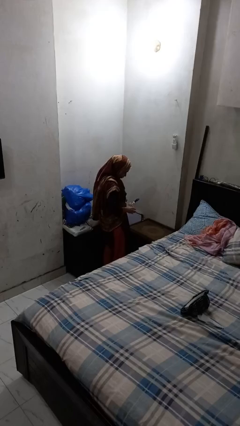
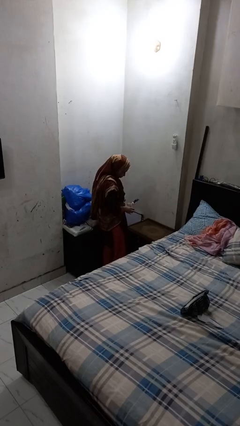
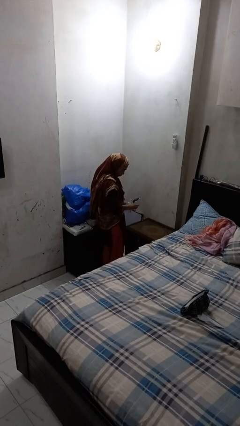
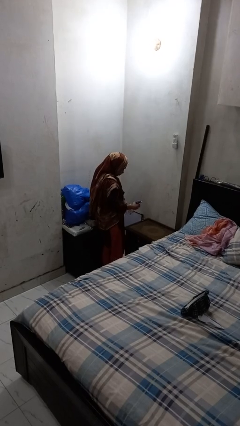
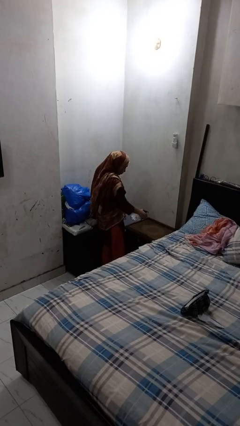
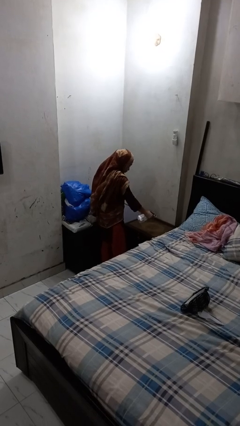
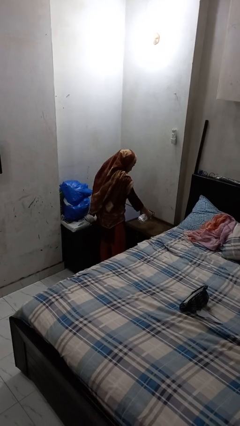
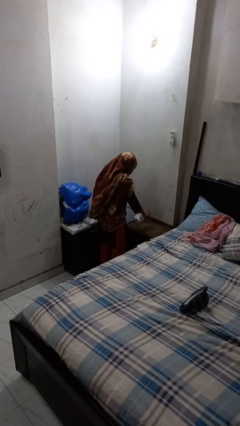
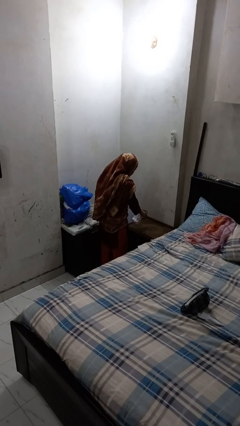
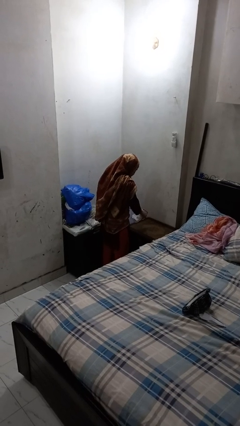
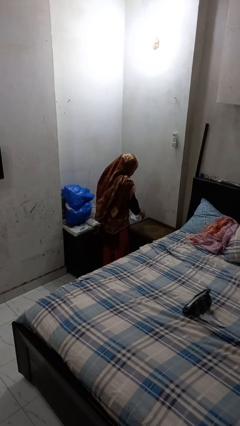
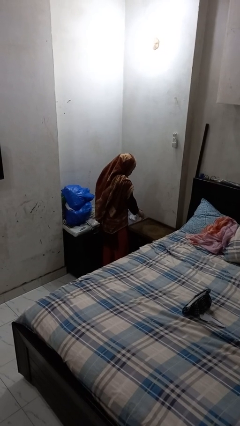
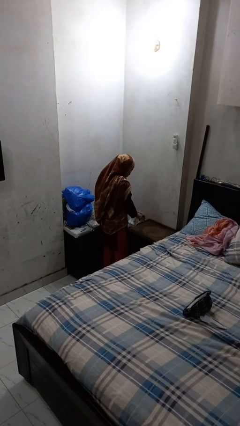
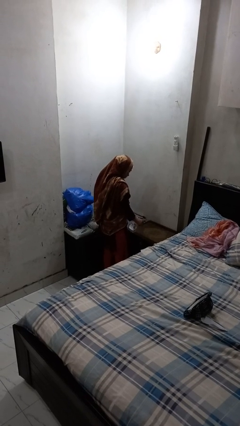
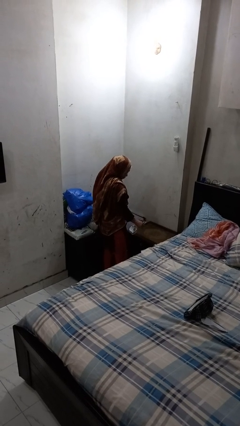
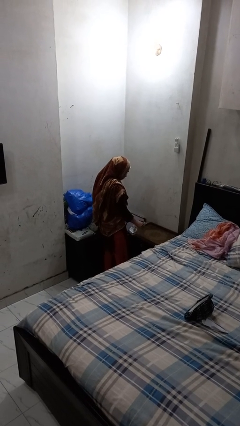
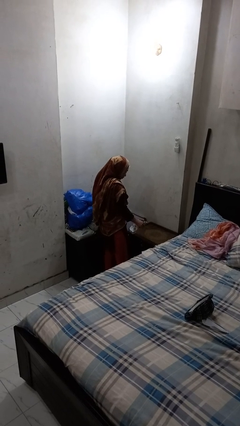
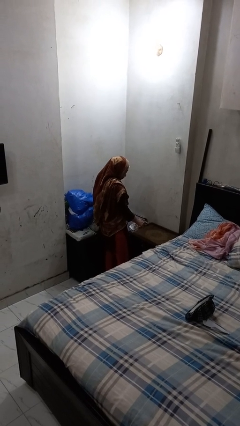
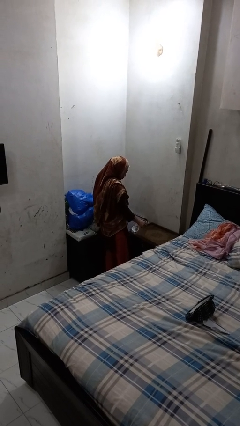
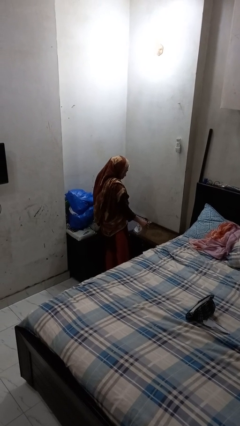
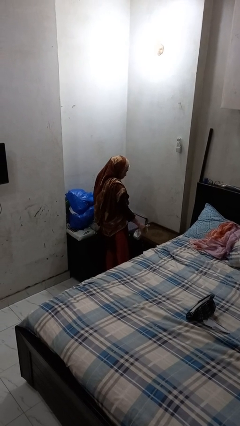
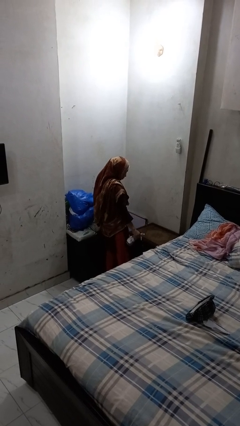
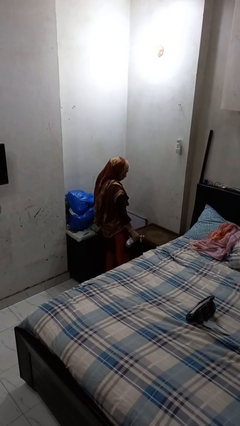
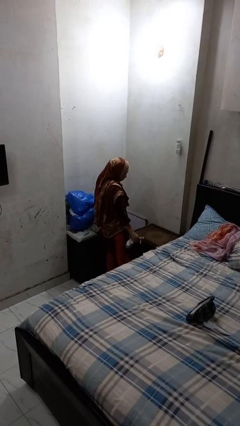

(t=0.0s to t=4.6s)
person sprays from bottle

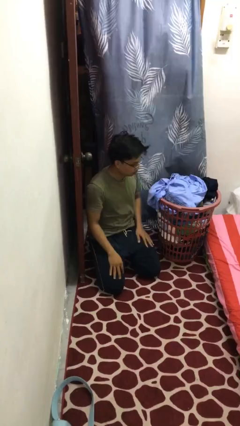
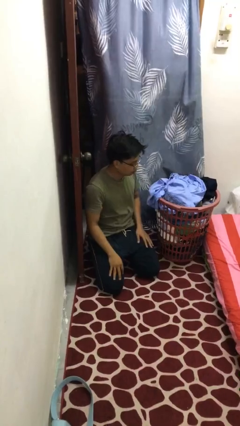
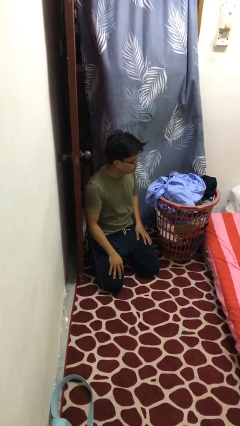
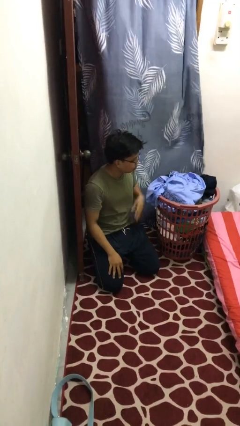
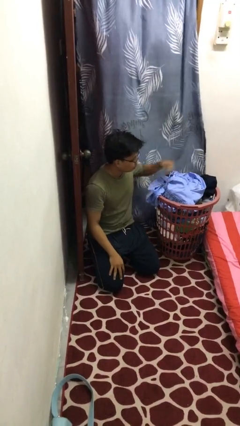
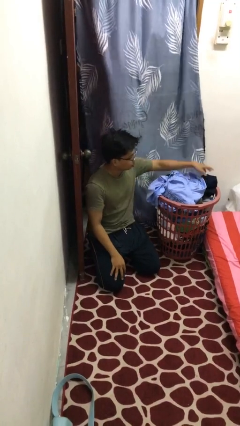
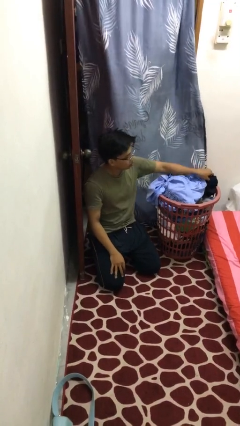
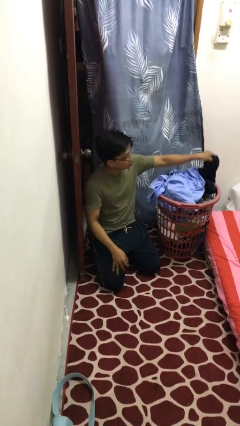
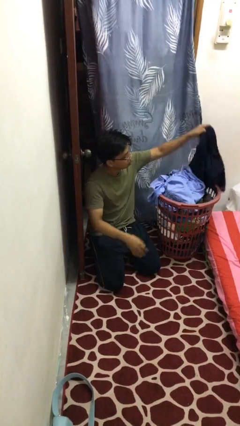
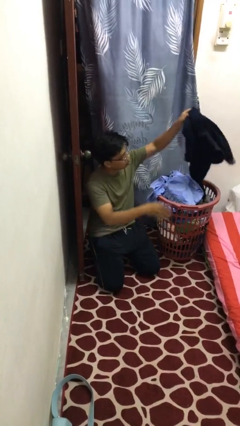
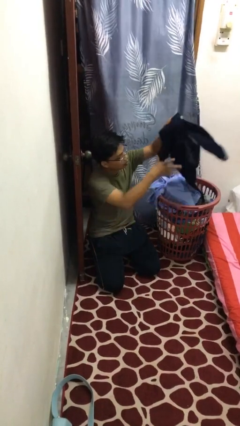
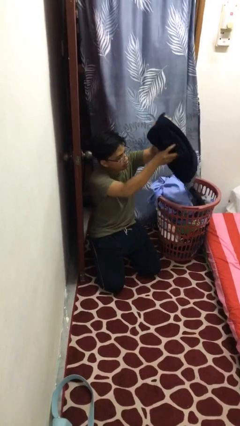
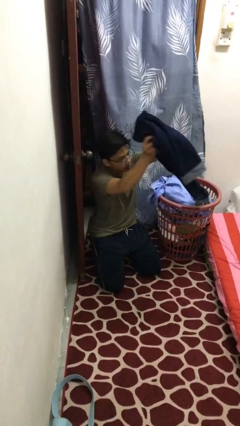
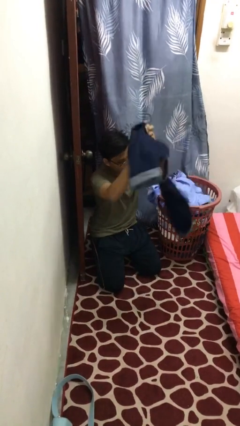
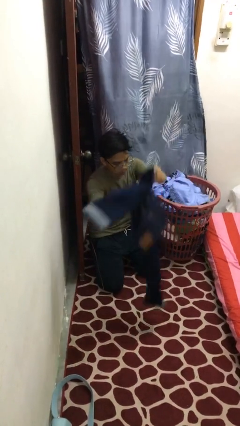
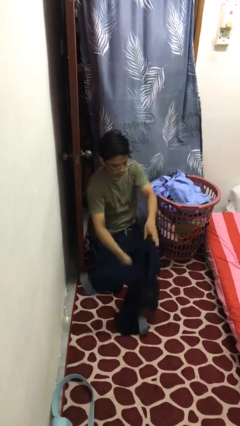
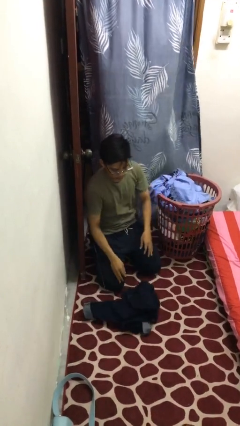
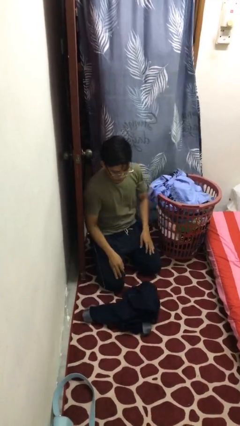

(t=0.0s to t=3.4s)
person takes object from basket

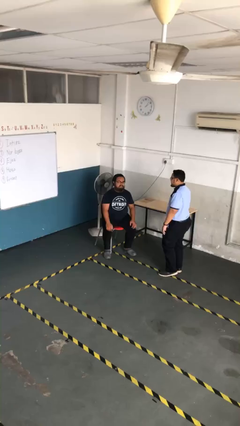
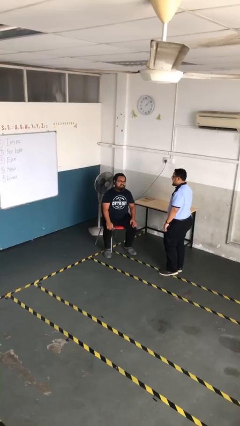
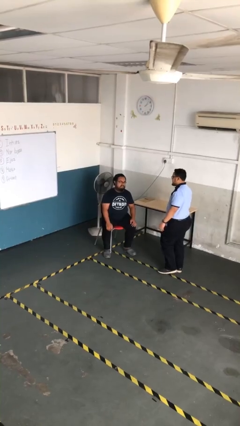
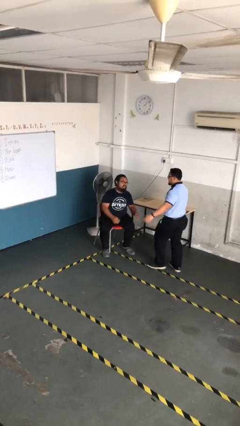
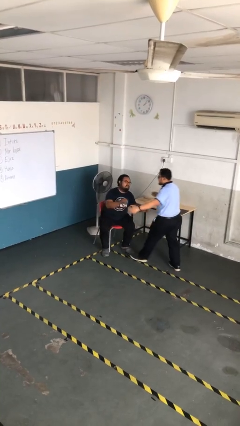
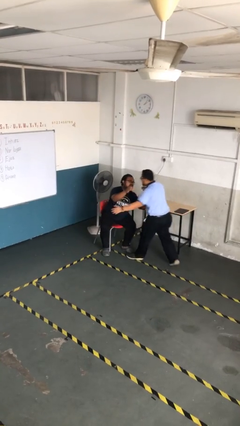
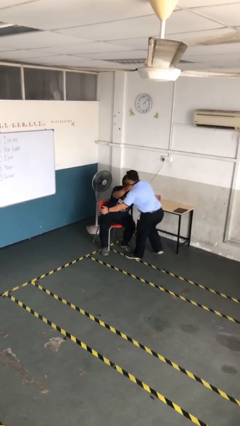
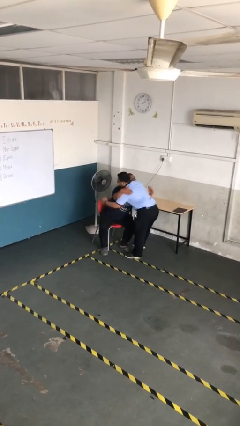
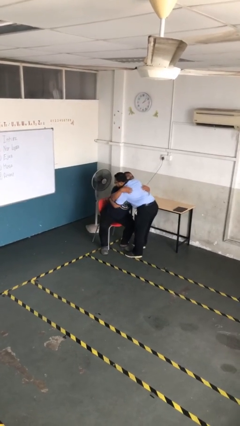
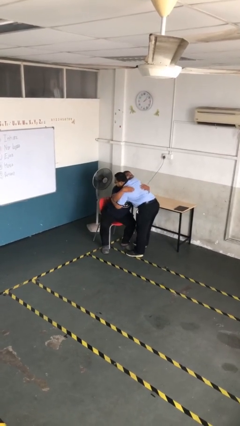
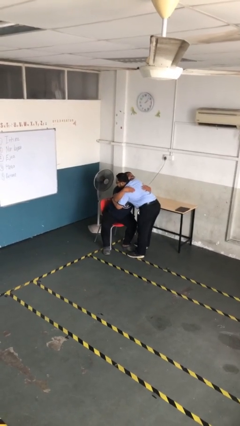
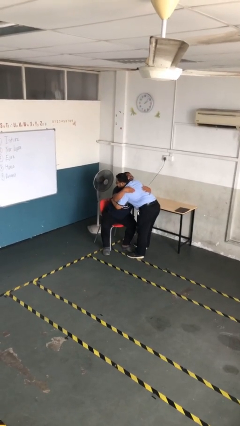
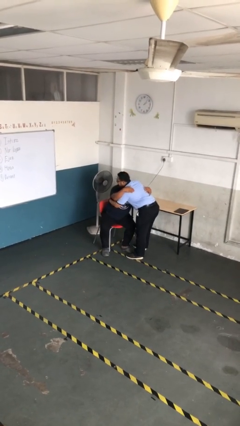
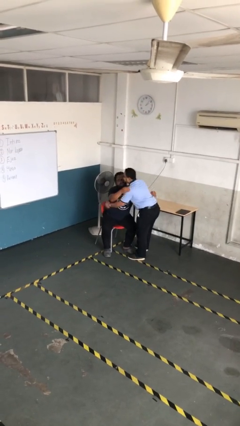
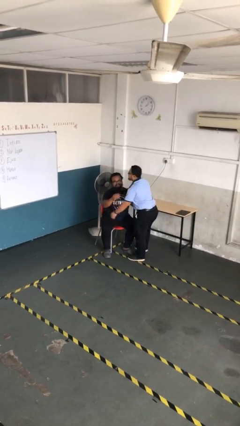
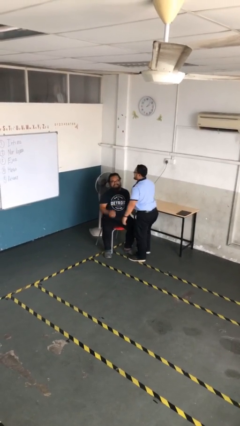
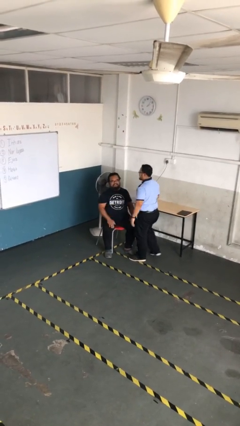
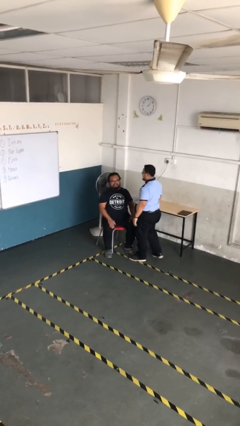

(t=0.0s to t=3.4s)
person embraces person

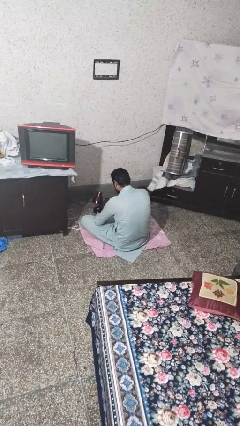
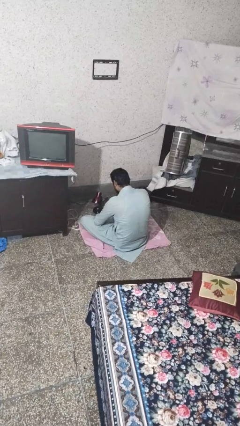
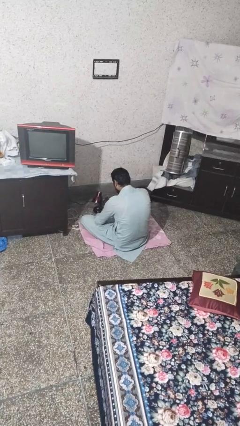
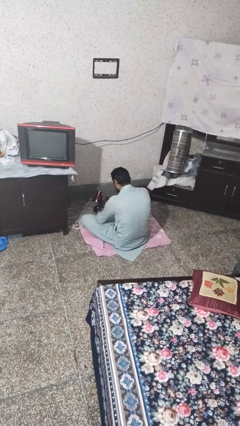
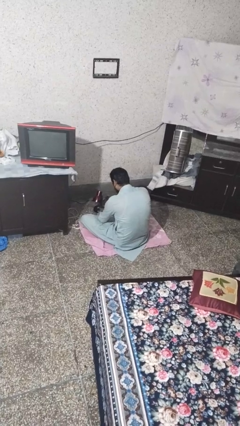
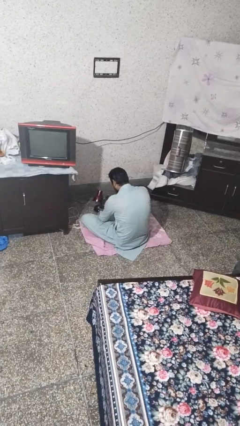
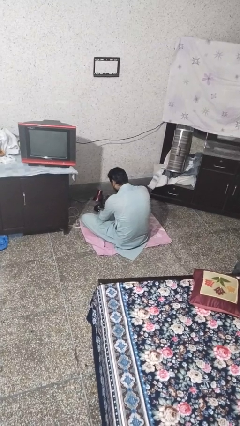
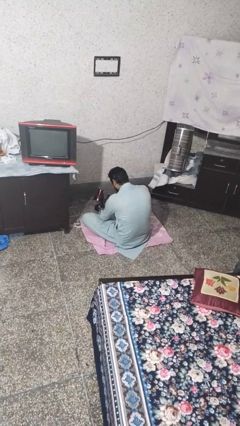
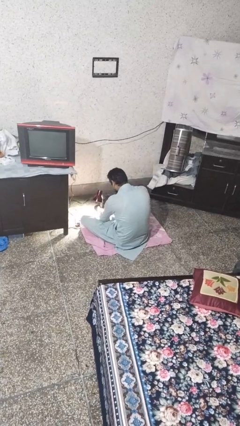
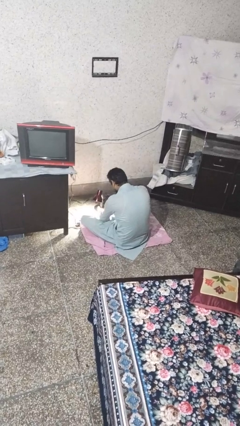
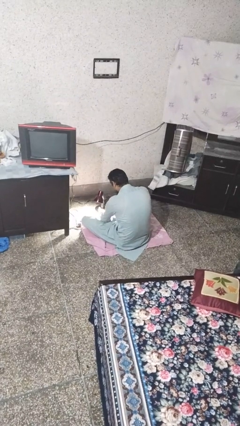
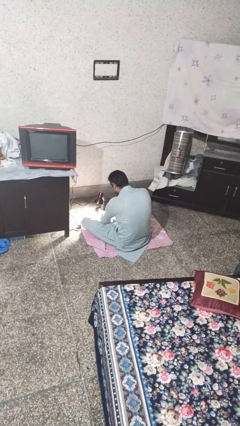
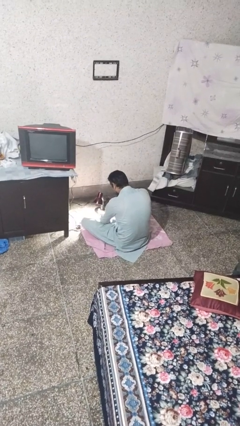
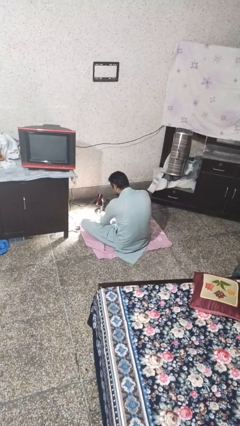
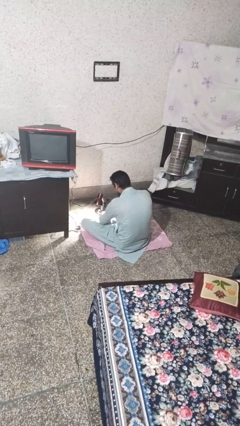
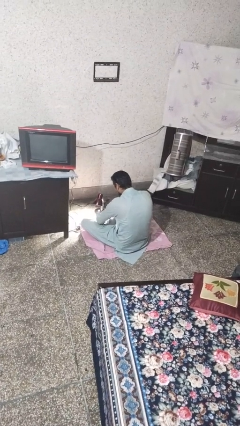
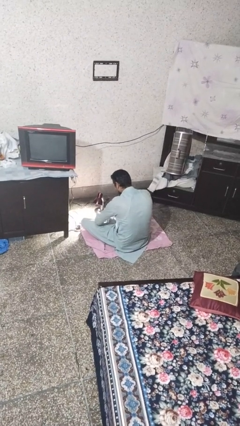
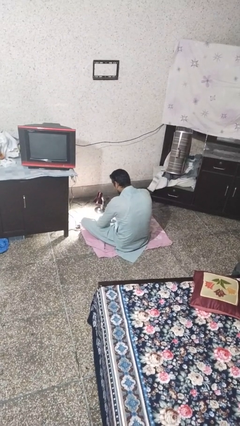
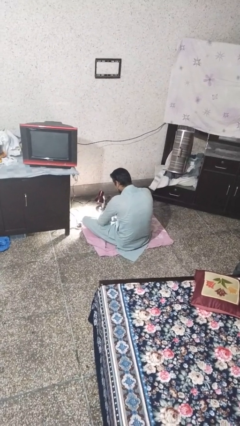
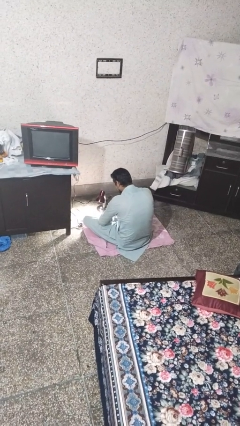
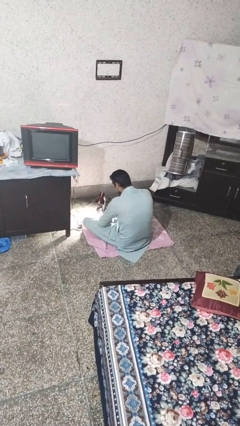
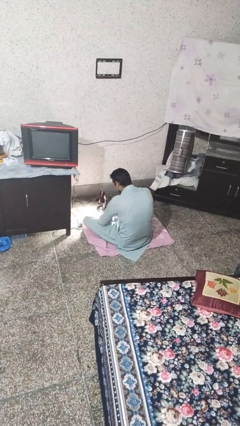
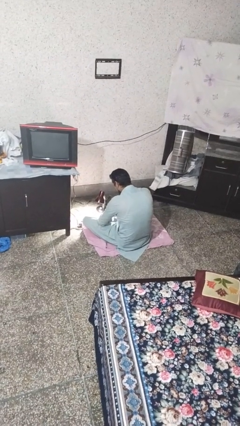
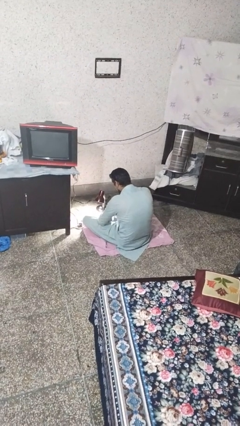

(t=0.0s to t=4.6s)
person turns on lamp

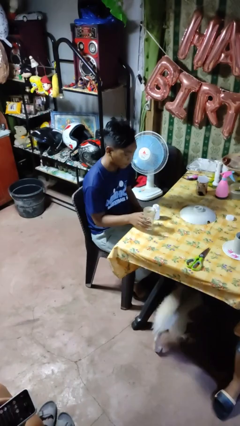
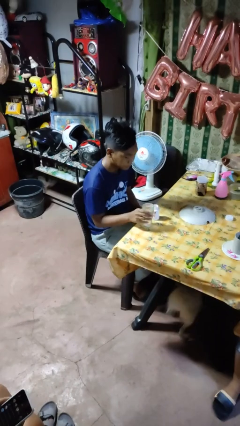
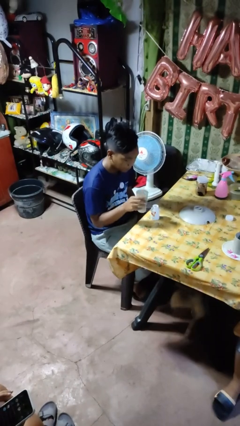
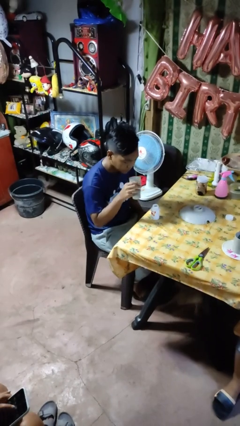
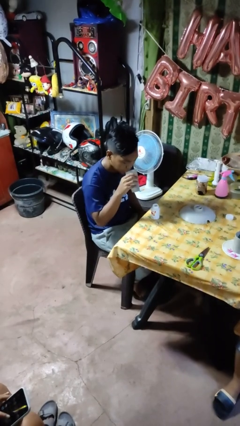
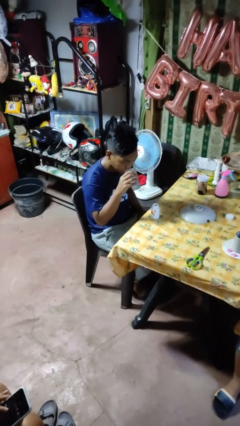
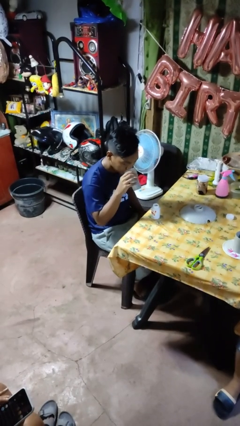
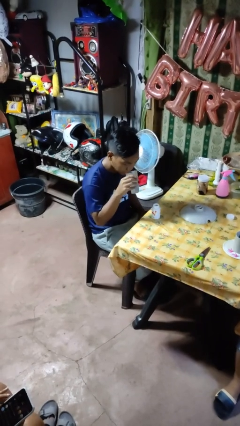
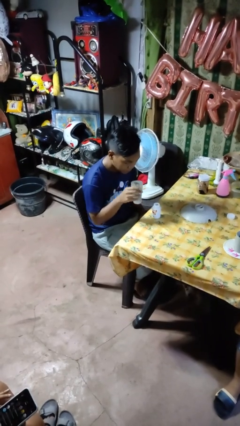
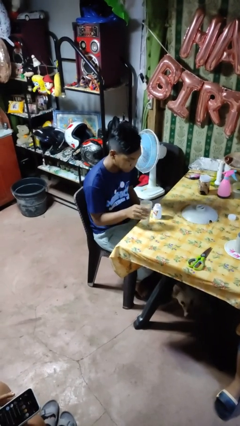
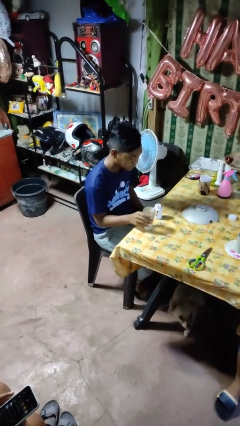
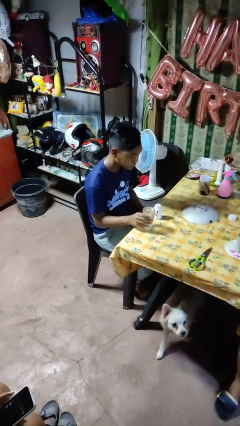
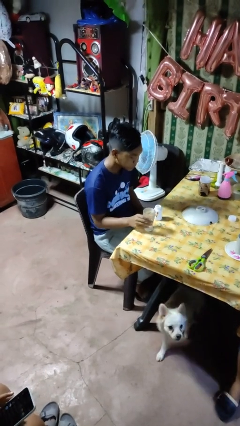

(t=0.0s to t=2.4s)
person drinks from cup
